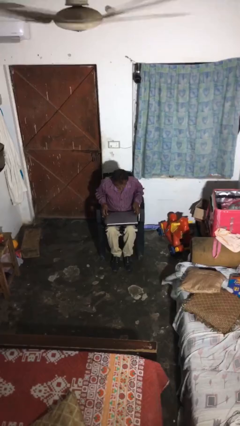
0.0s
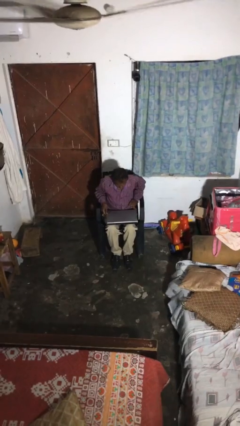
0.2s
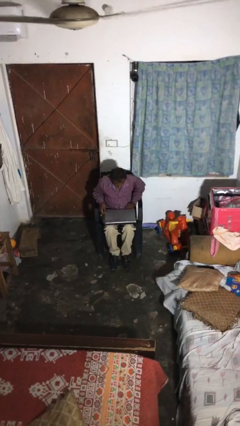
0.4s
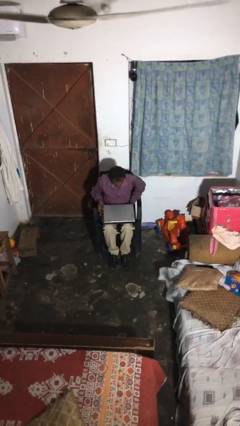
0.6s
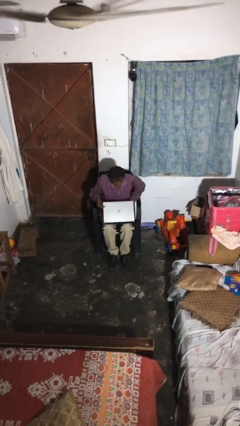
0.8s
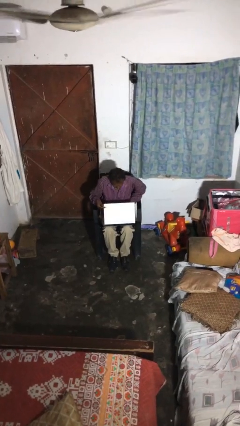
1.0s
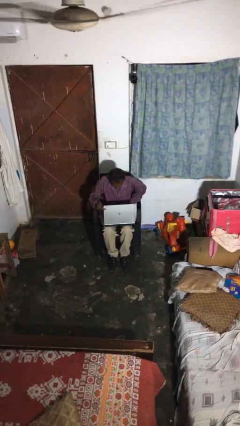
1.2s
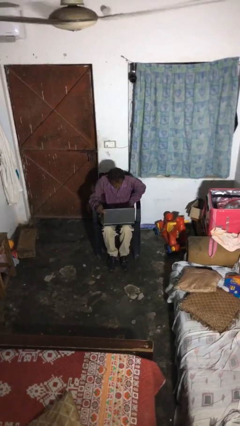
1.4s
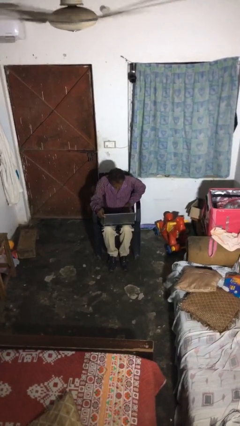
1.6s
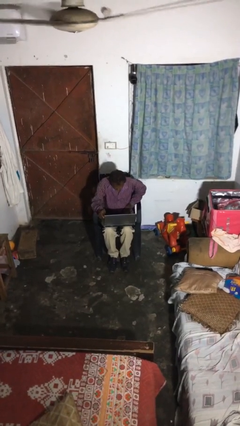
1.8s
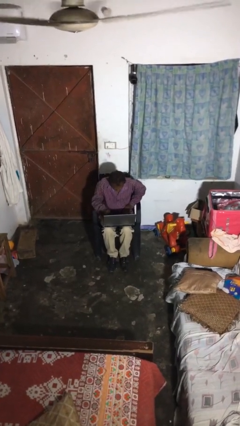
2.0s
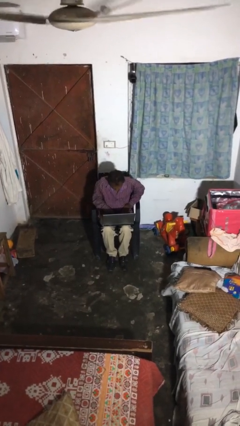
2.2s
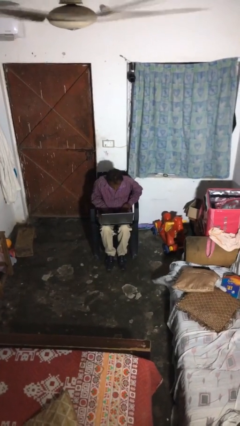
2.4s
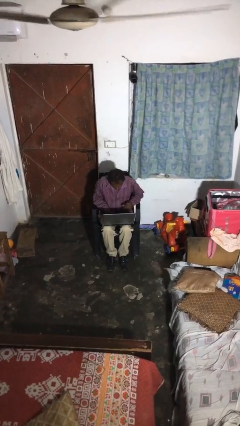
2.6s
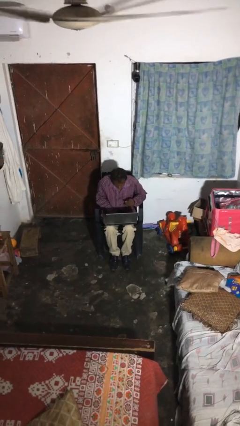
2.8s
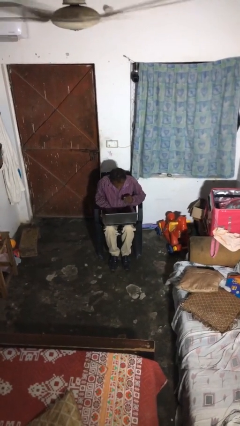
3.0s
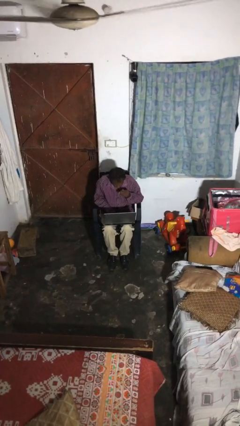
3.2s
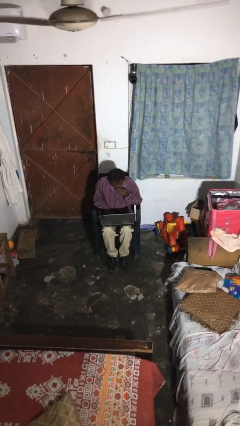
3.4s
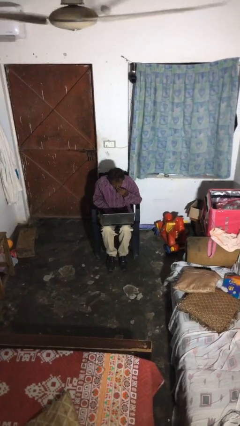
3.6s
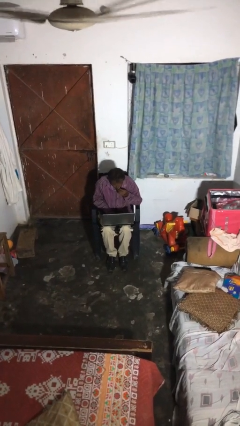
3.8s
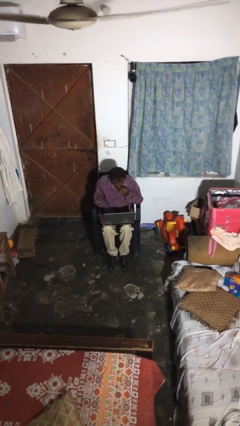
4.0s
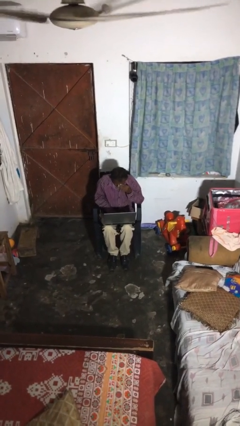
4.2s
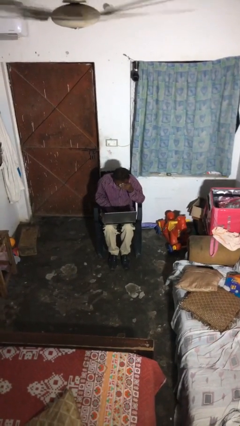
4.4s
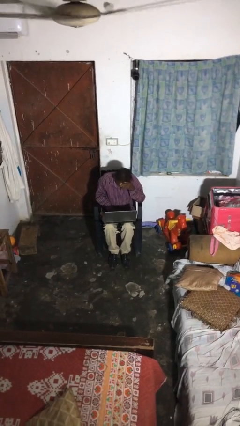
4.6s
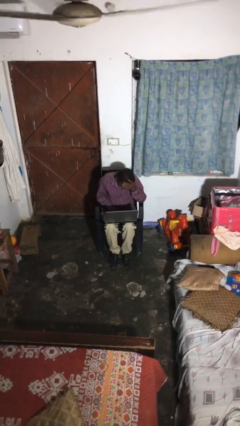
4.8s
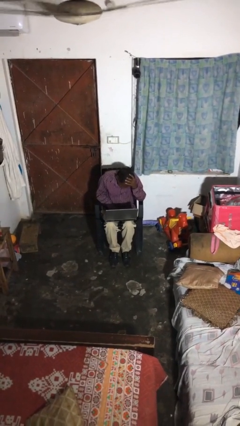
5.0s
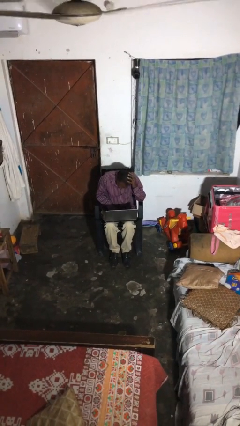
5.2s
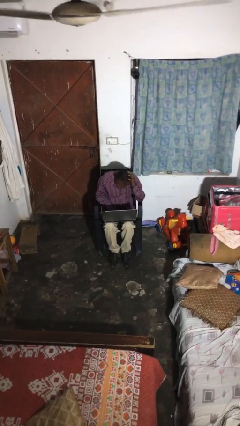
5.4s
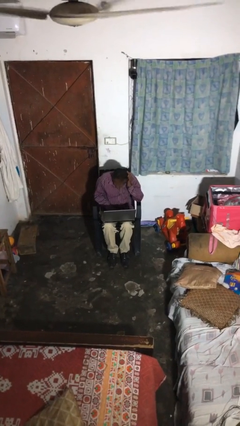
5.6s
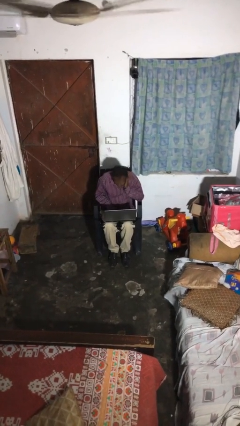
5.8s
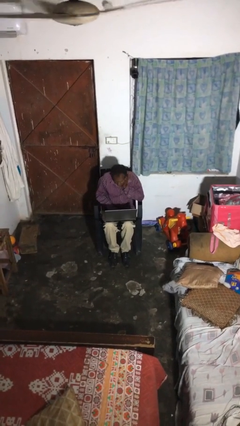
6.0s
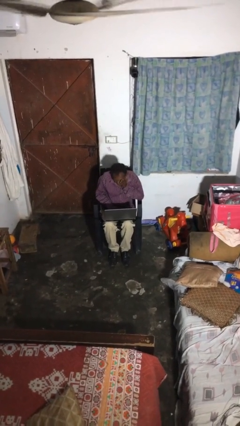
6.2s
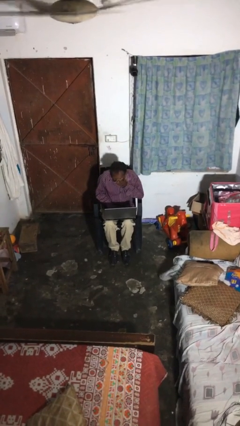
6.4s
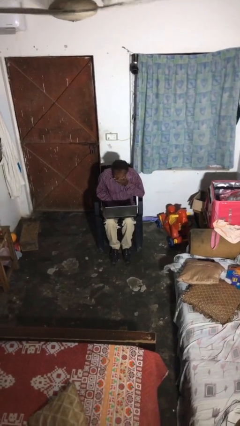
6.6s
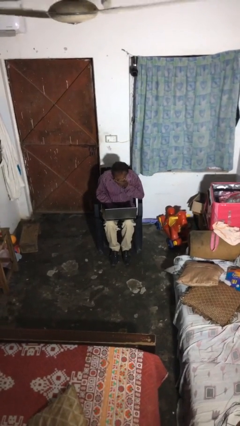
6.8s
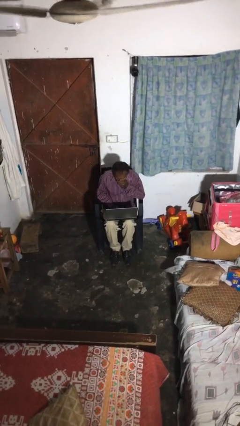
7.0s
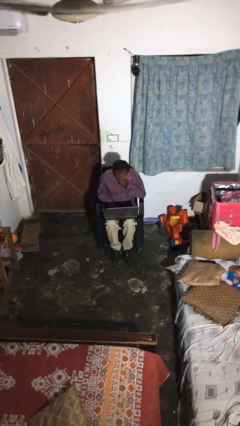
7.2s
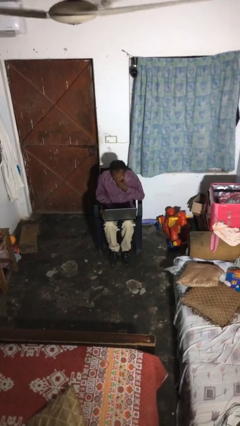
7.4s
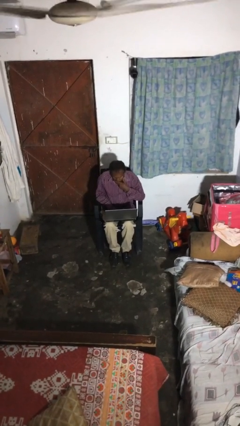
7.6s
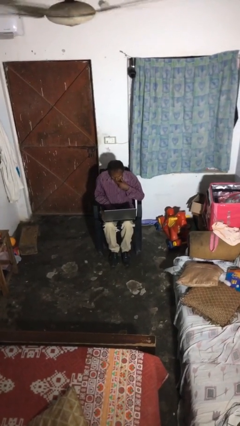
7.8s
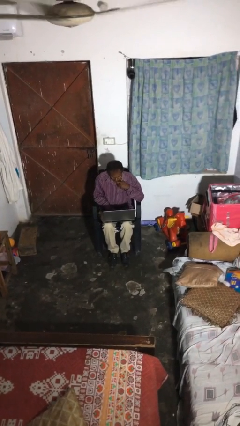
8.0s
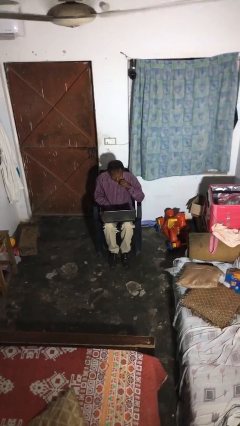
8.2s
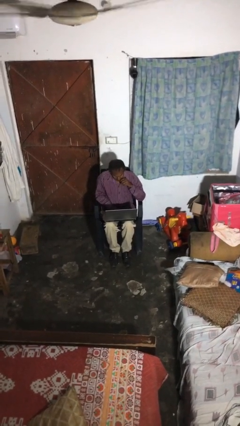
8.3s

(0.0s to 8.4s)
person interacts with laptop

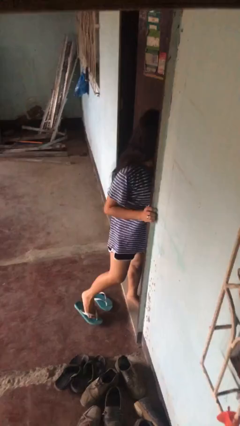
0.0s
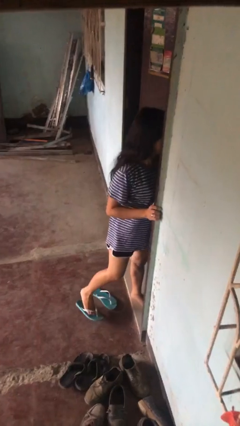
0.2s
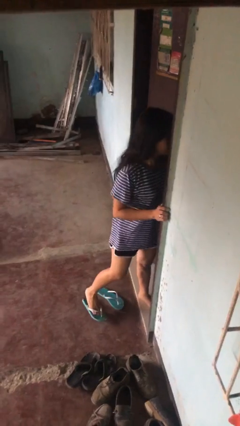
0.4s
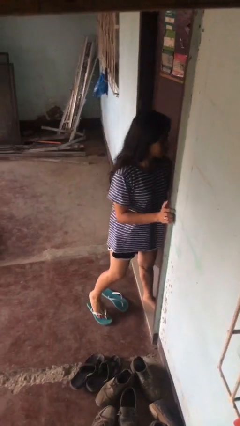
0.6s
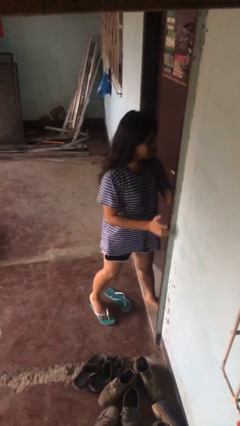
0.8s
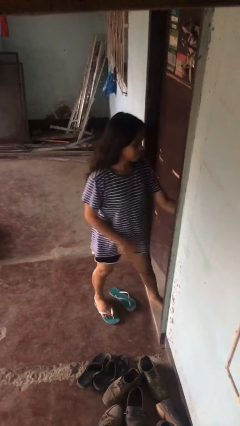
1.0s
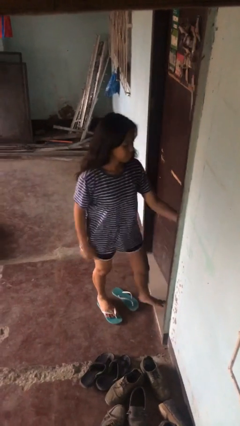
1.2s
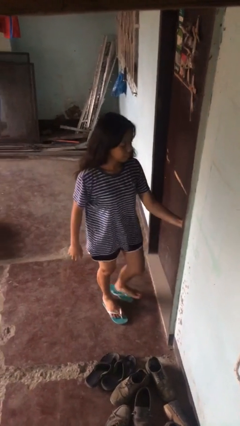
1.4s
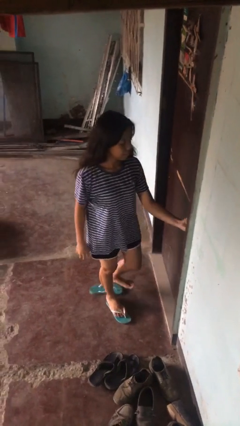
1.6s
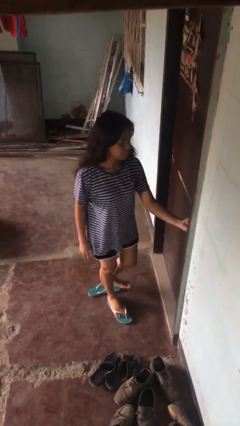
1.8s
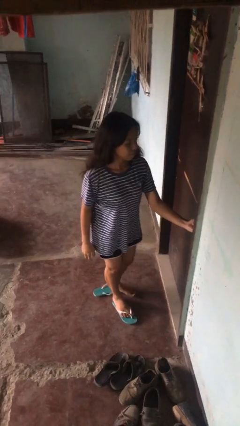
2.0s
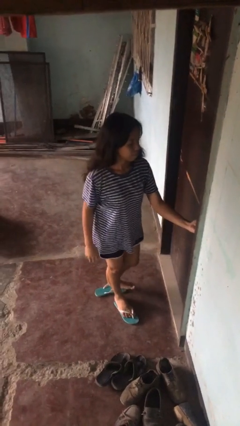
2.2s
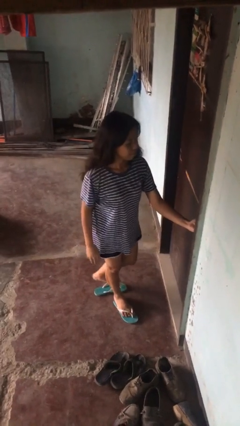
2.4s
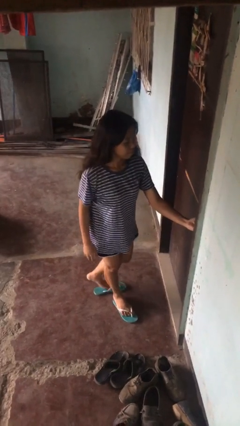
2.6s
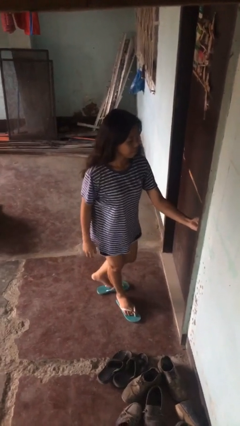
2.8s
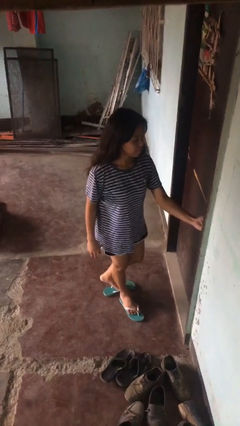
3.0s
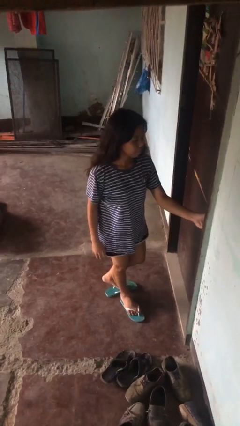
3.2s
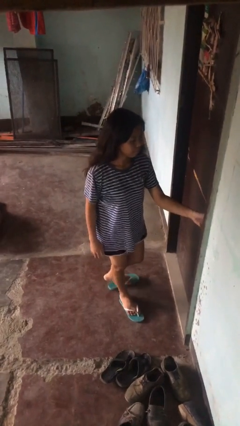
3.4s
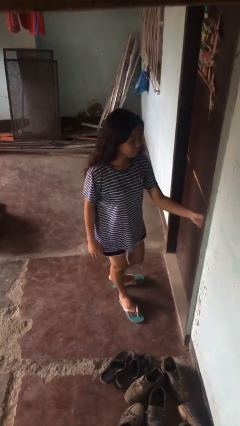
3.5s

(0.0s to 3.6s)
person closes facility door

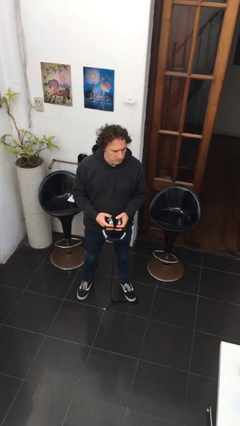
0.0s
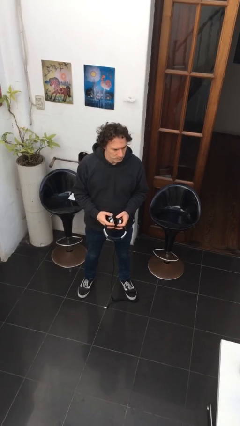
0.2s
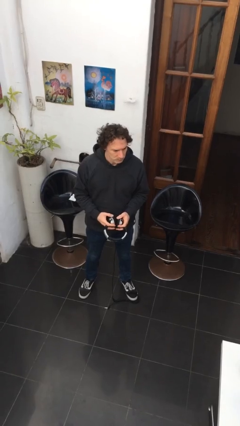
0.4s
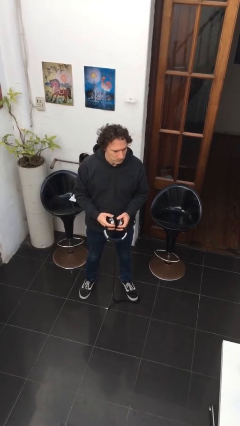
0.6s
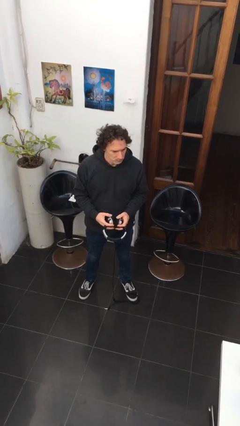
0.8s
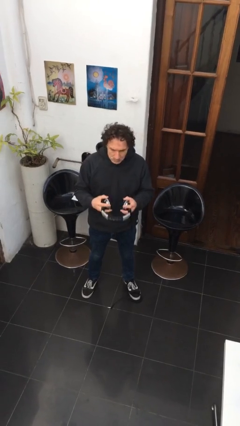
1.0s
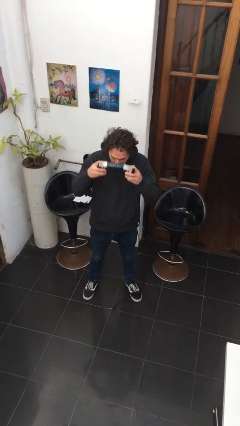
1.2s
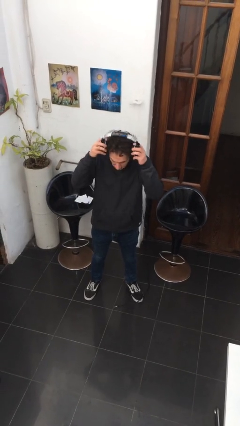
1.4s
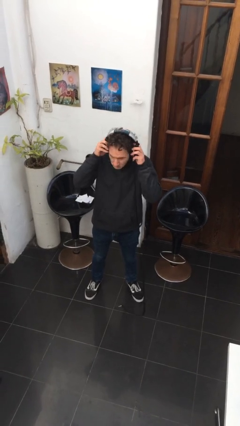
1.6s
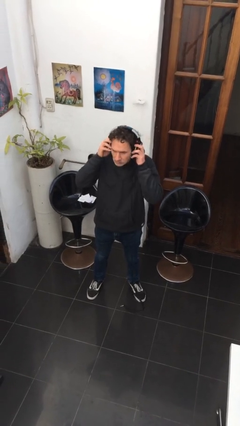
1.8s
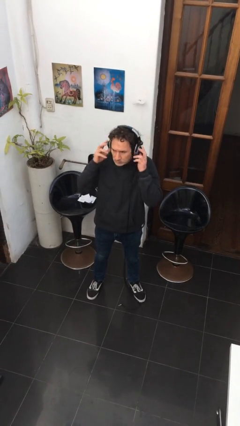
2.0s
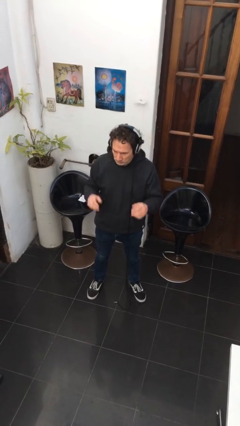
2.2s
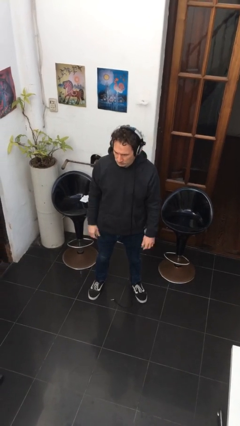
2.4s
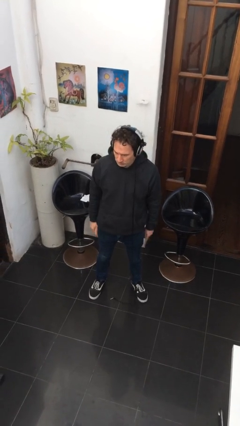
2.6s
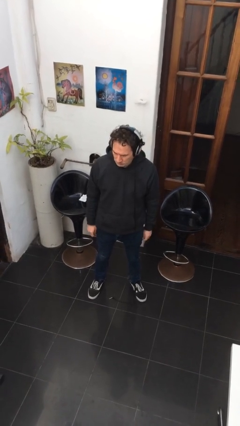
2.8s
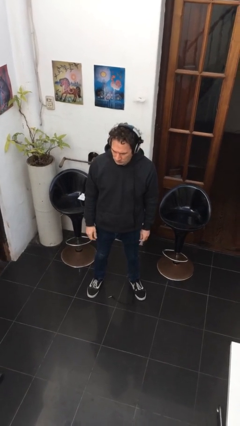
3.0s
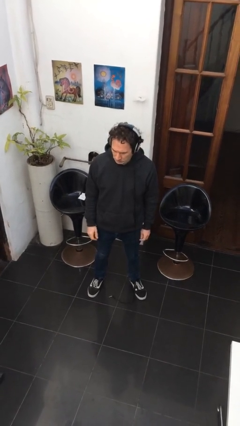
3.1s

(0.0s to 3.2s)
person puts on headphones

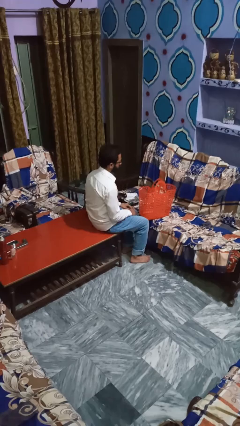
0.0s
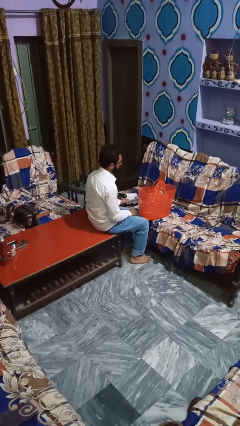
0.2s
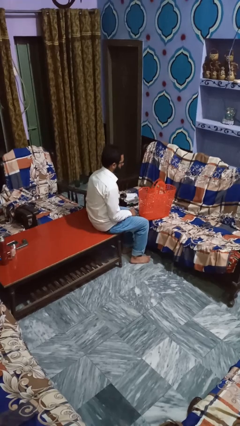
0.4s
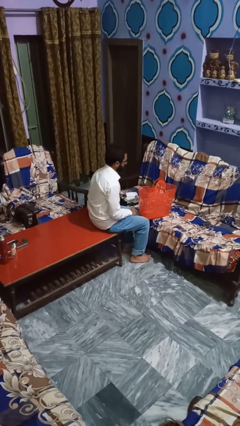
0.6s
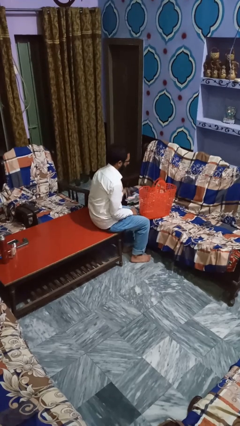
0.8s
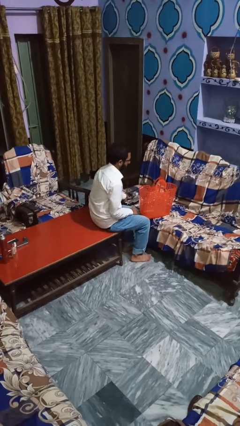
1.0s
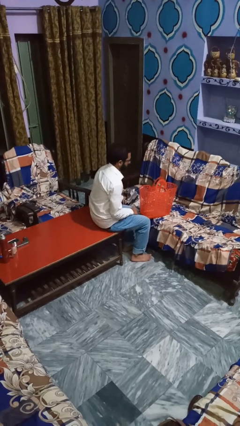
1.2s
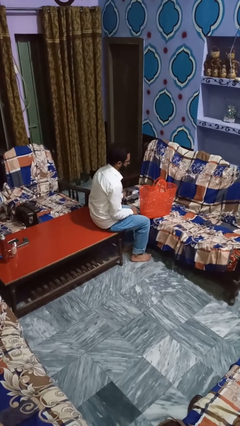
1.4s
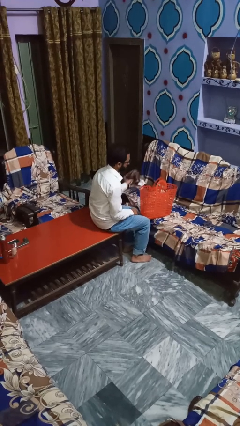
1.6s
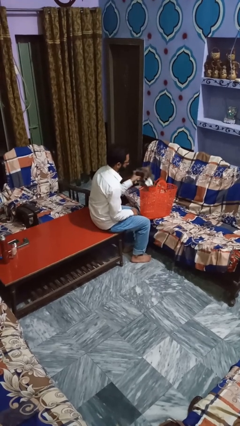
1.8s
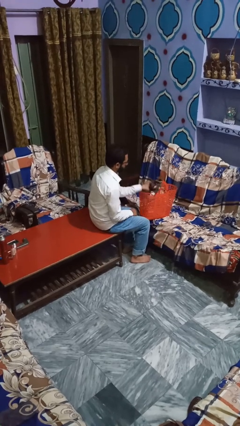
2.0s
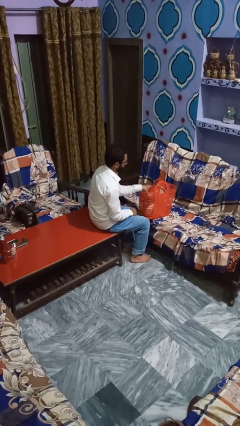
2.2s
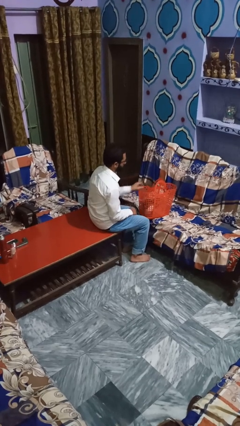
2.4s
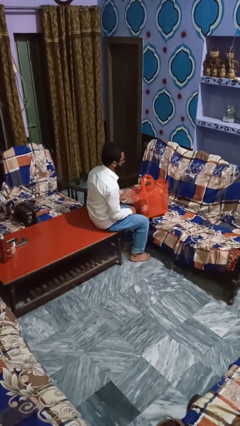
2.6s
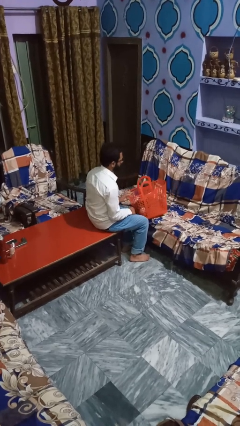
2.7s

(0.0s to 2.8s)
person discards trash
